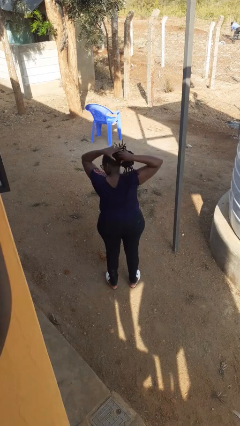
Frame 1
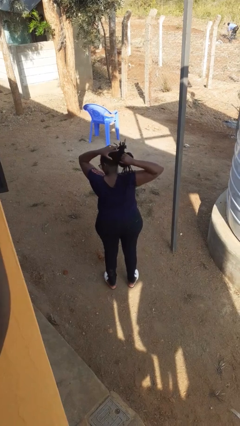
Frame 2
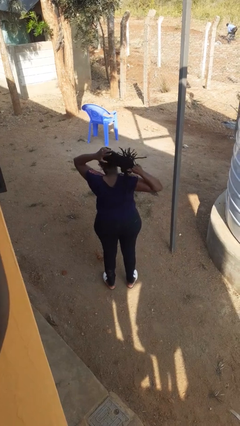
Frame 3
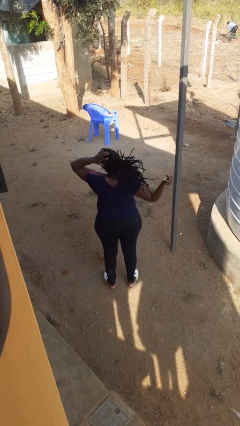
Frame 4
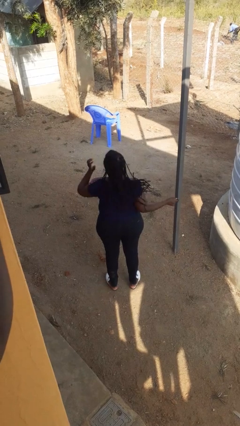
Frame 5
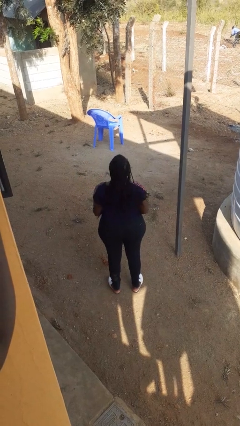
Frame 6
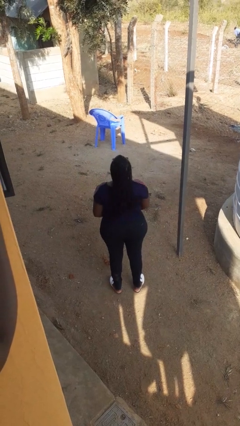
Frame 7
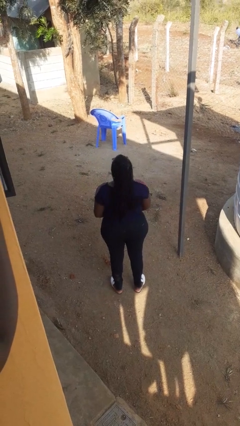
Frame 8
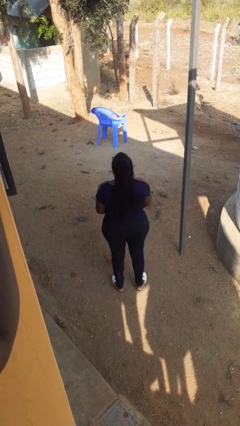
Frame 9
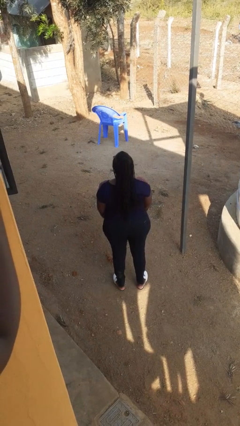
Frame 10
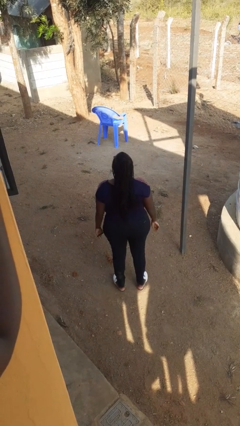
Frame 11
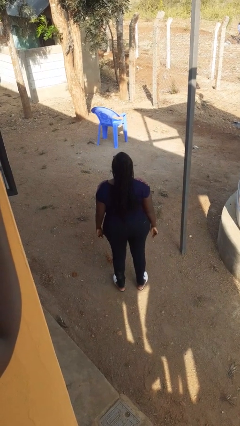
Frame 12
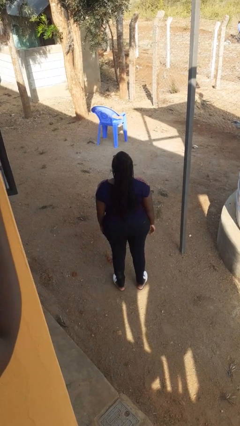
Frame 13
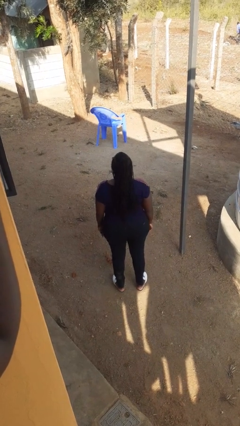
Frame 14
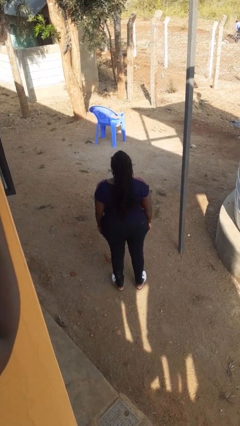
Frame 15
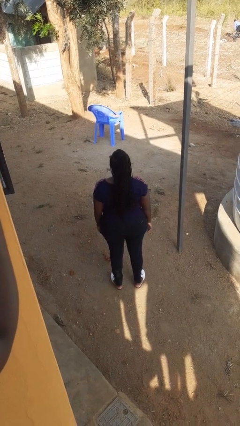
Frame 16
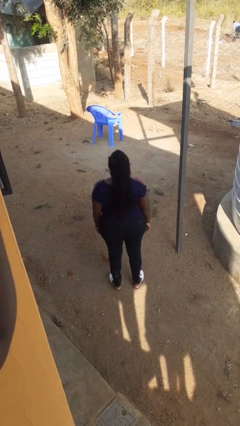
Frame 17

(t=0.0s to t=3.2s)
person takes off hairtie

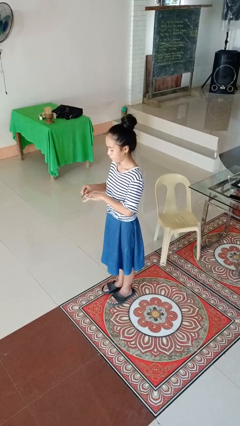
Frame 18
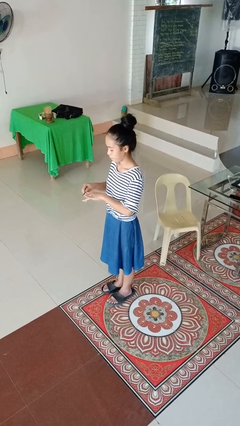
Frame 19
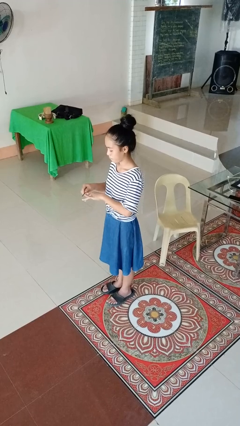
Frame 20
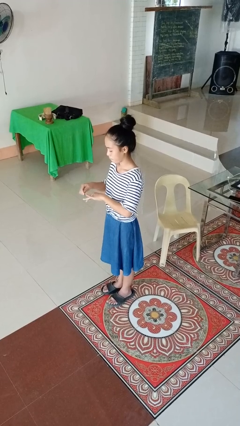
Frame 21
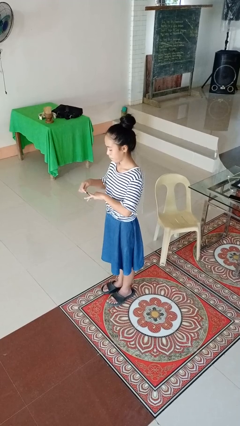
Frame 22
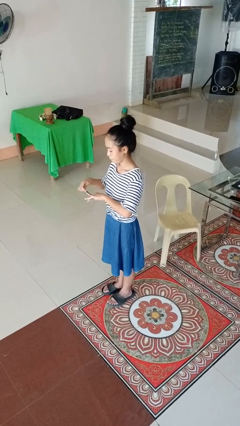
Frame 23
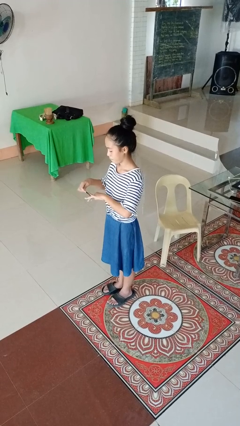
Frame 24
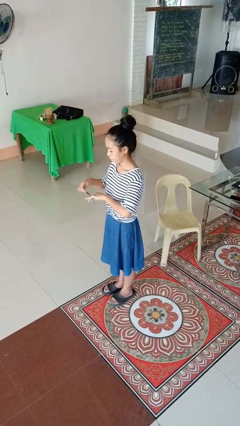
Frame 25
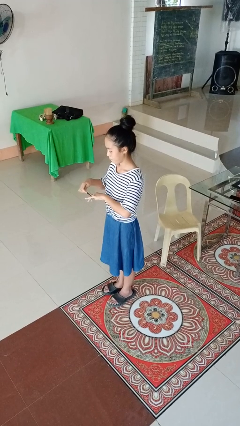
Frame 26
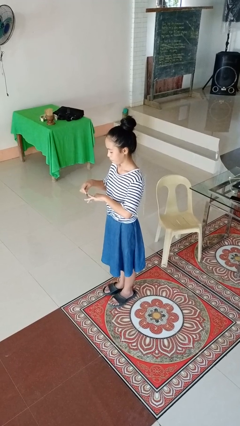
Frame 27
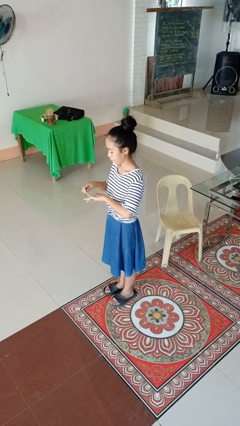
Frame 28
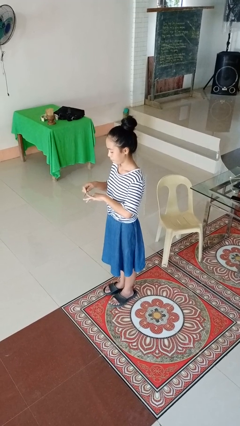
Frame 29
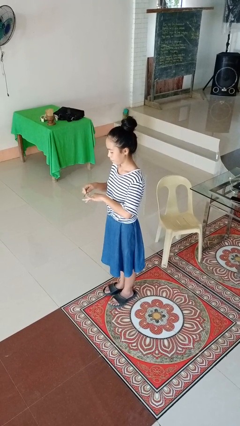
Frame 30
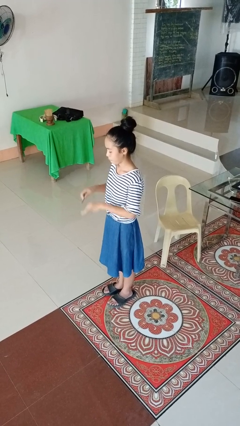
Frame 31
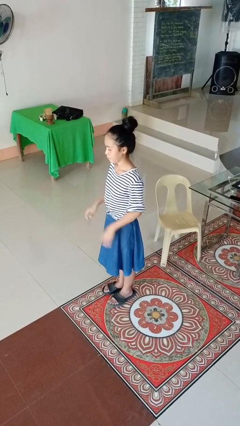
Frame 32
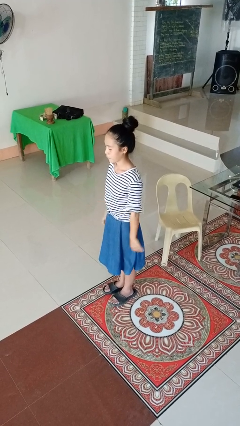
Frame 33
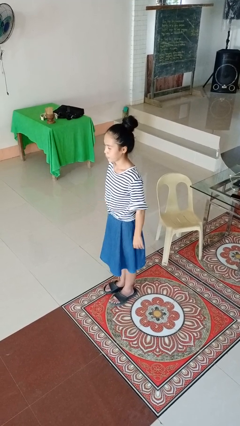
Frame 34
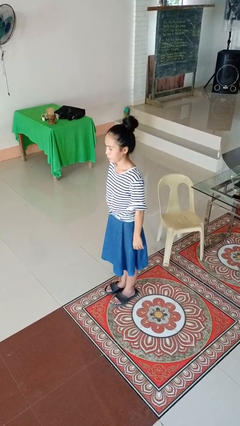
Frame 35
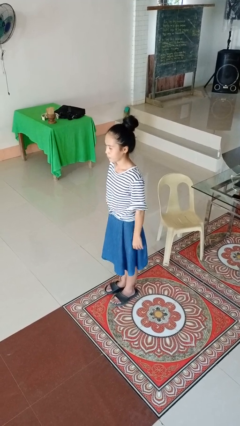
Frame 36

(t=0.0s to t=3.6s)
person files fingernails

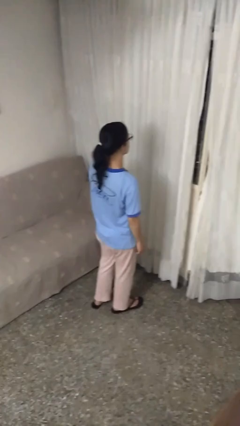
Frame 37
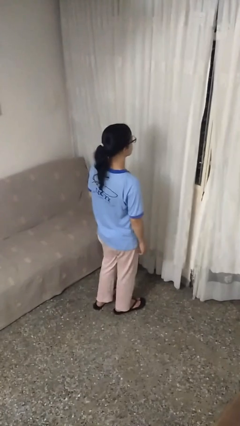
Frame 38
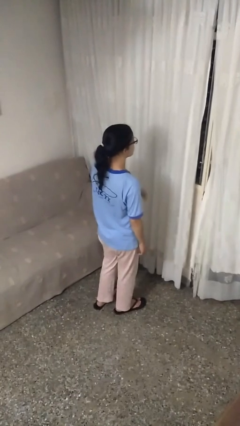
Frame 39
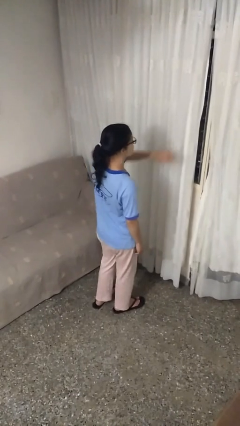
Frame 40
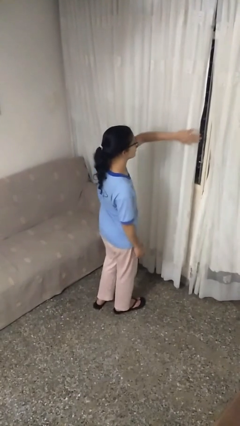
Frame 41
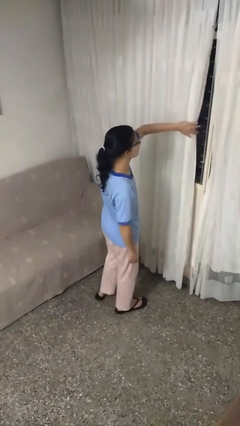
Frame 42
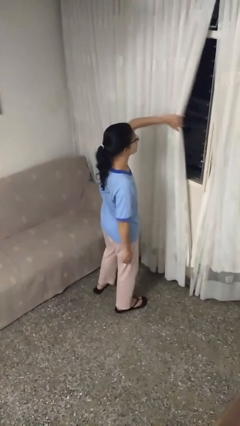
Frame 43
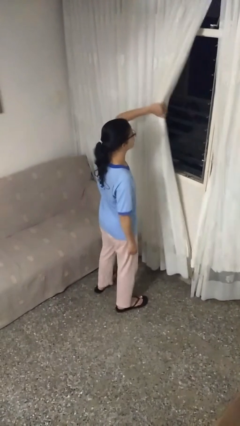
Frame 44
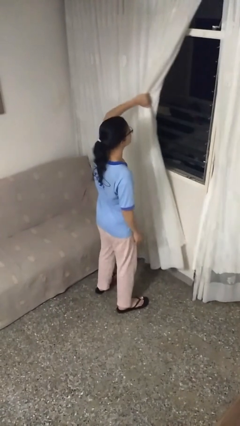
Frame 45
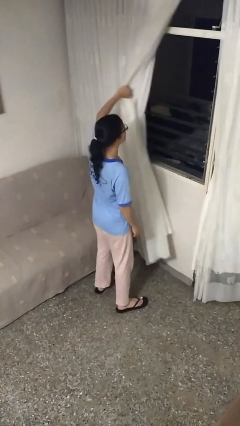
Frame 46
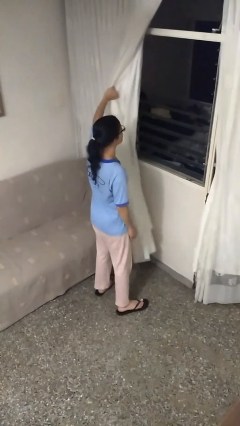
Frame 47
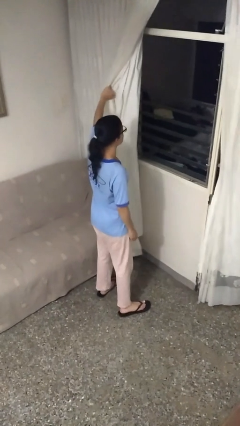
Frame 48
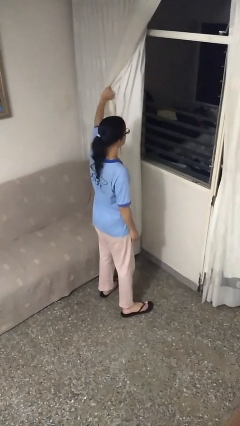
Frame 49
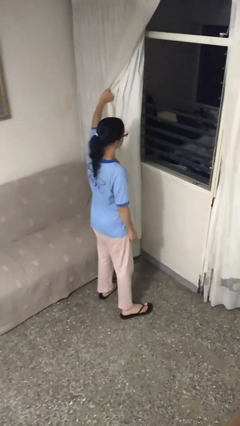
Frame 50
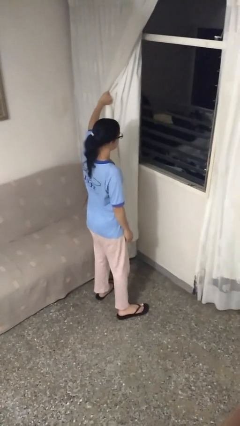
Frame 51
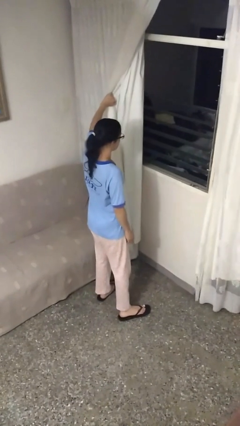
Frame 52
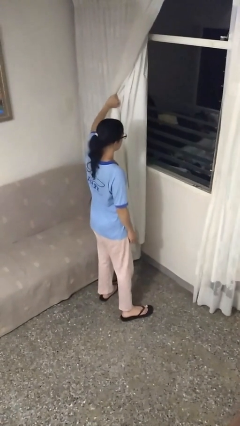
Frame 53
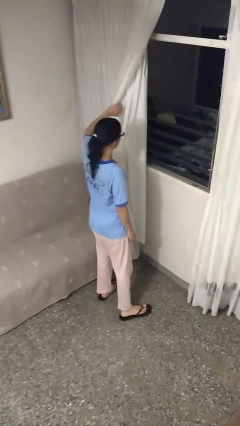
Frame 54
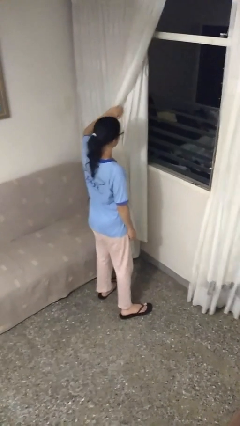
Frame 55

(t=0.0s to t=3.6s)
person opens curtains

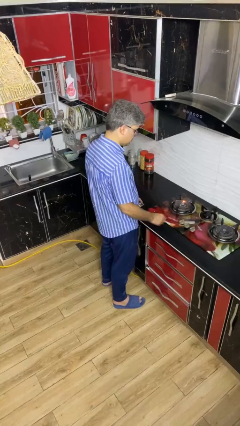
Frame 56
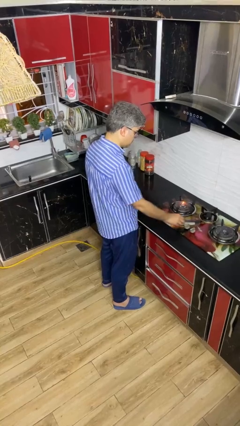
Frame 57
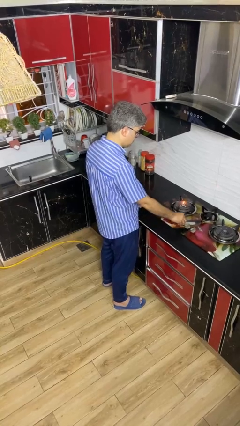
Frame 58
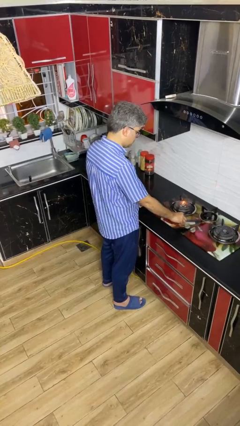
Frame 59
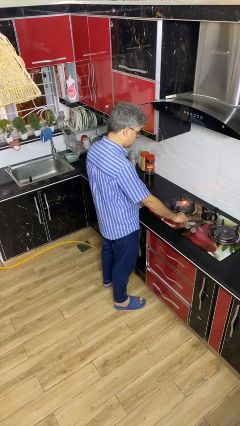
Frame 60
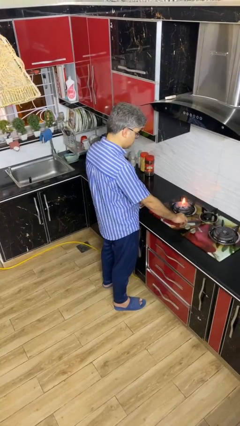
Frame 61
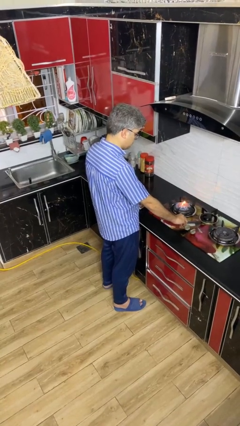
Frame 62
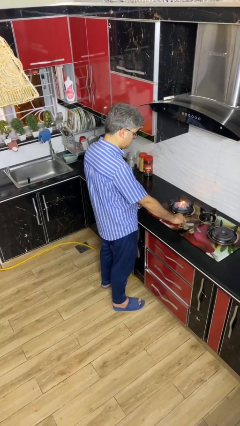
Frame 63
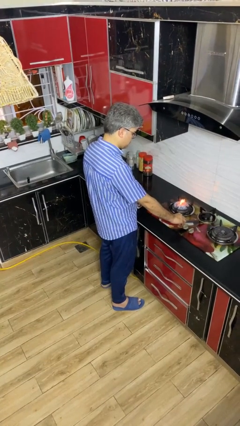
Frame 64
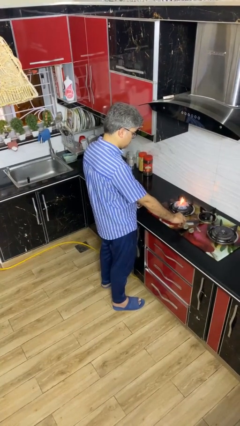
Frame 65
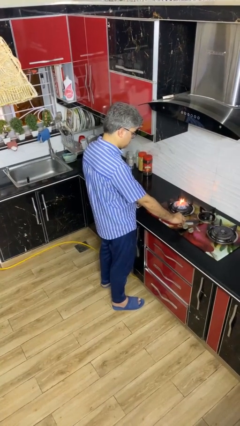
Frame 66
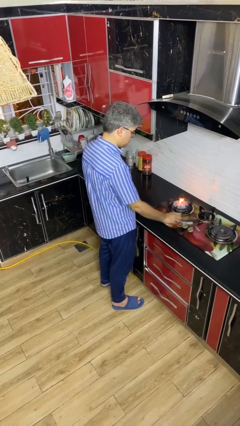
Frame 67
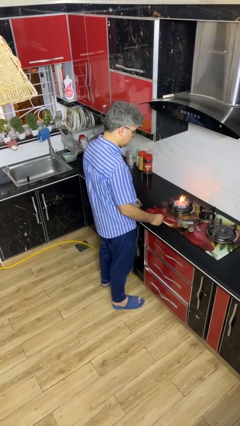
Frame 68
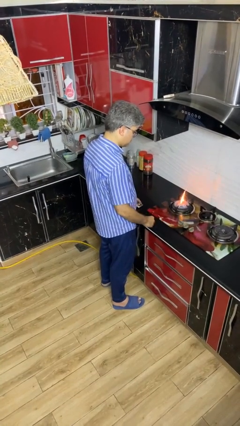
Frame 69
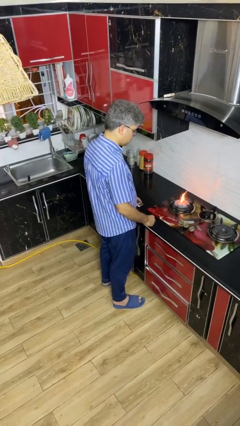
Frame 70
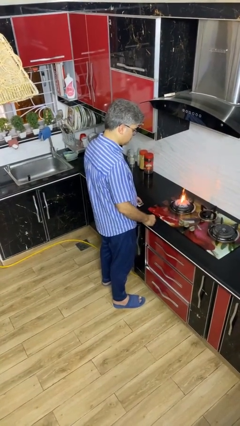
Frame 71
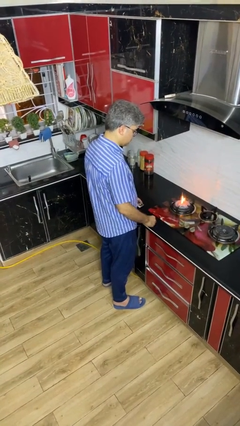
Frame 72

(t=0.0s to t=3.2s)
person turns on stovetop

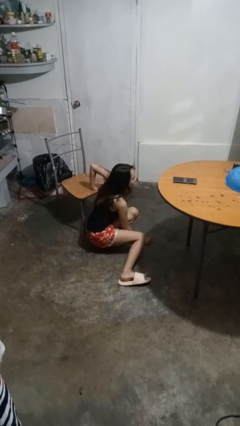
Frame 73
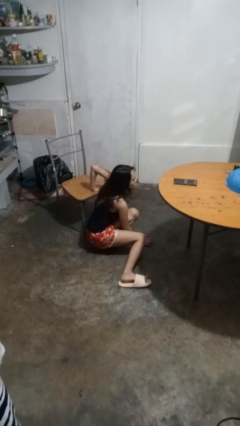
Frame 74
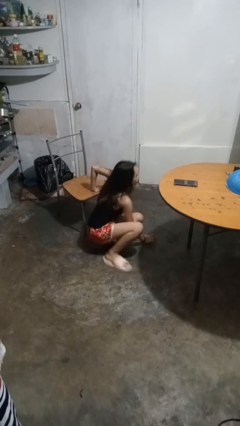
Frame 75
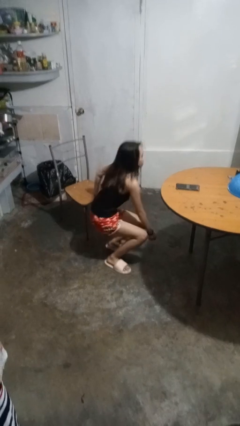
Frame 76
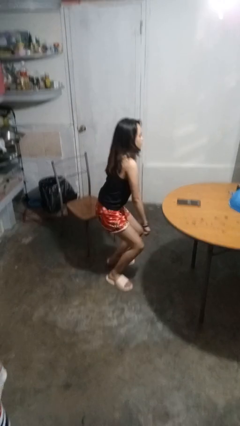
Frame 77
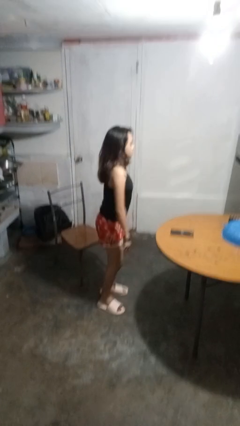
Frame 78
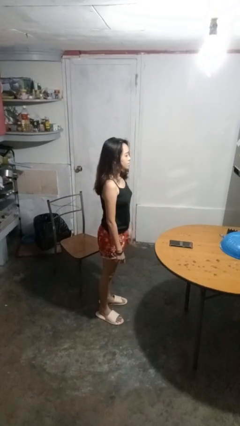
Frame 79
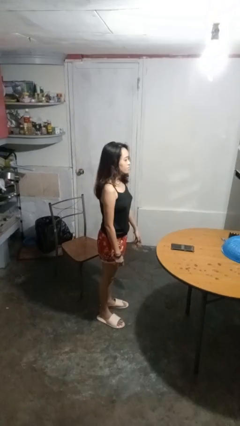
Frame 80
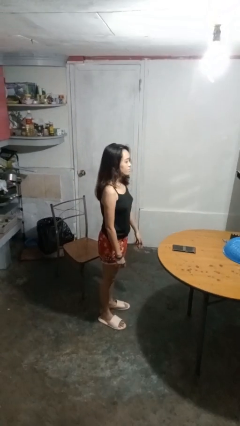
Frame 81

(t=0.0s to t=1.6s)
person stands up from floor

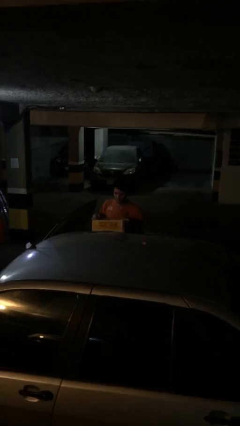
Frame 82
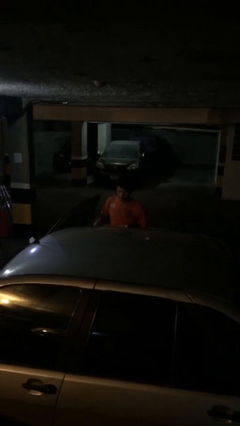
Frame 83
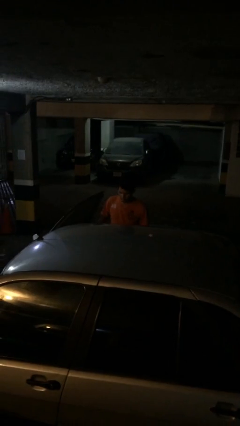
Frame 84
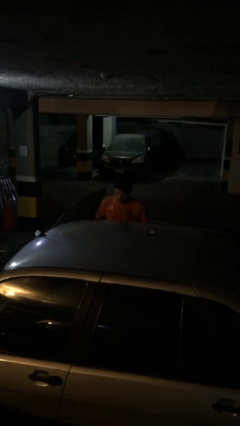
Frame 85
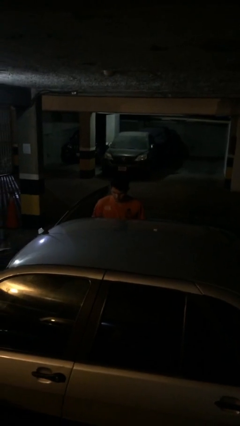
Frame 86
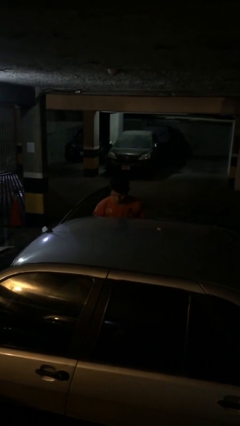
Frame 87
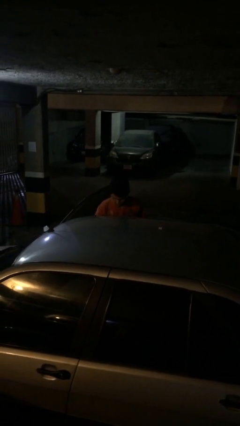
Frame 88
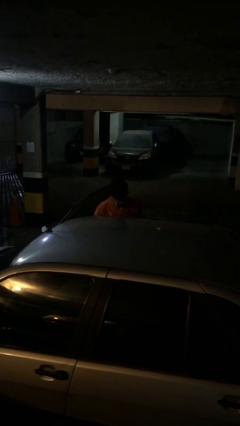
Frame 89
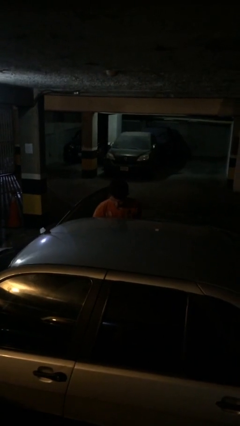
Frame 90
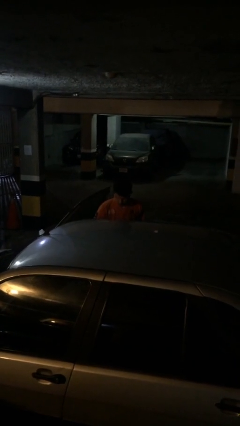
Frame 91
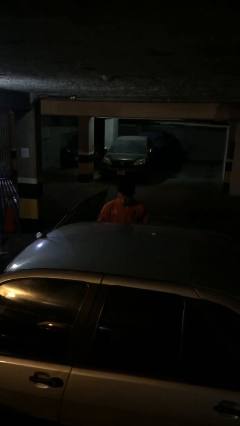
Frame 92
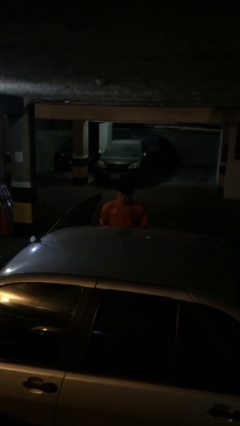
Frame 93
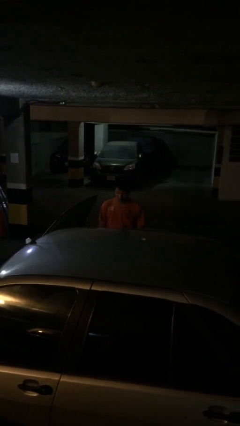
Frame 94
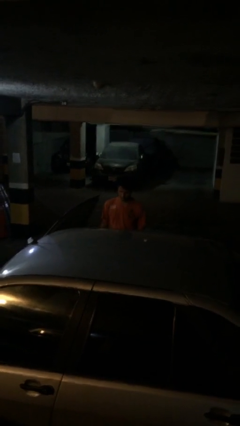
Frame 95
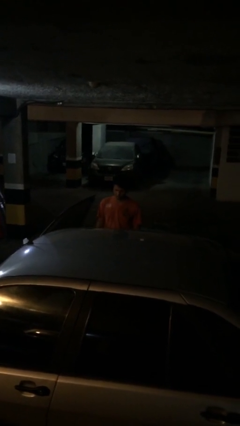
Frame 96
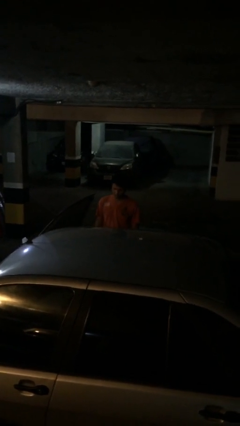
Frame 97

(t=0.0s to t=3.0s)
person loads car
